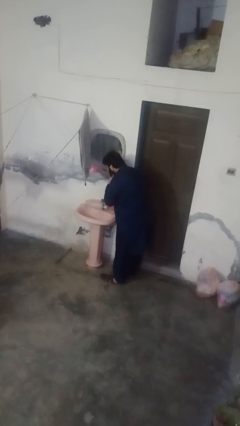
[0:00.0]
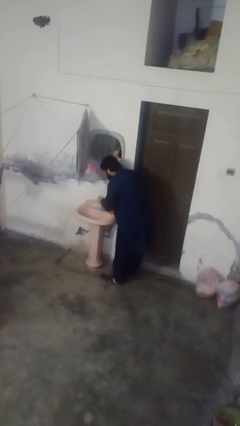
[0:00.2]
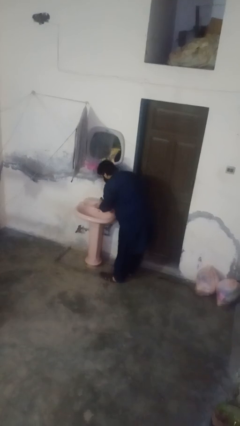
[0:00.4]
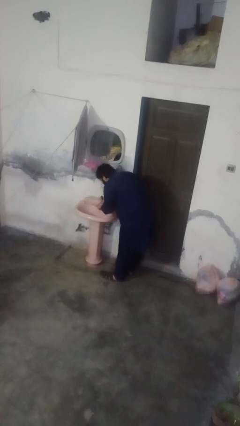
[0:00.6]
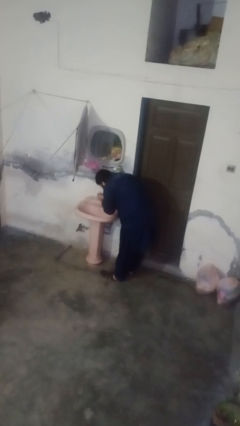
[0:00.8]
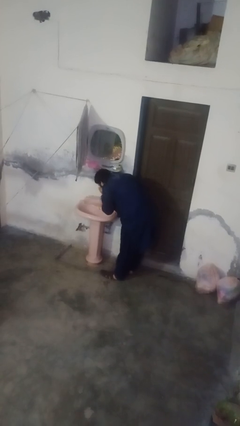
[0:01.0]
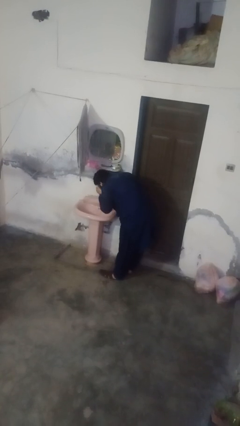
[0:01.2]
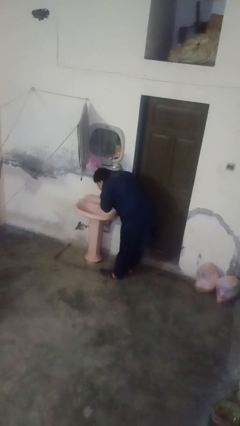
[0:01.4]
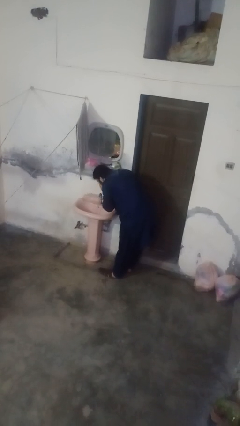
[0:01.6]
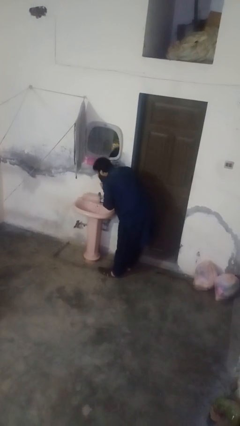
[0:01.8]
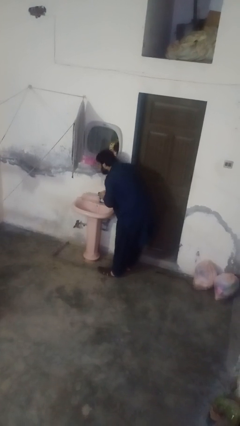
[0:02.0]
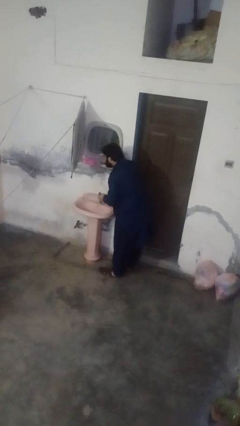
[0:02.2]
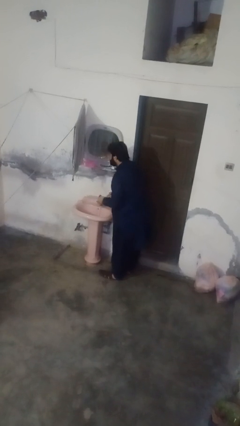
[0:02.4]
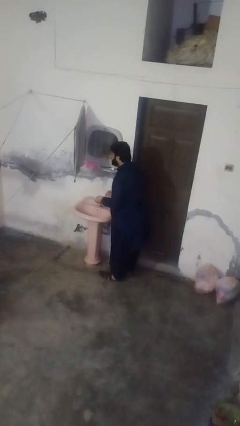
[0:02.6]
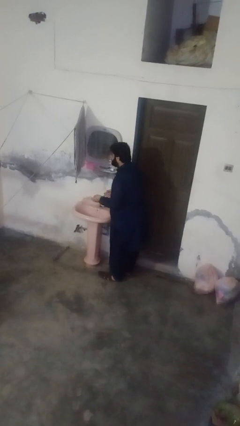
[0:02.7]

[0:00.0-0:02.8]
person washes face

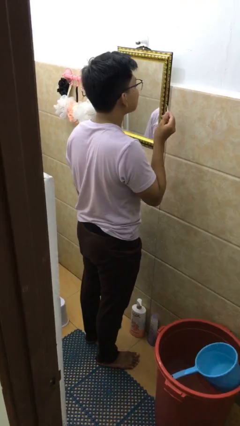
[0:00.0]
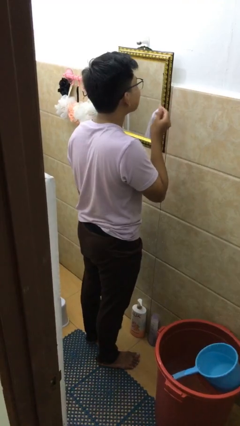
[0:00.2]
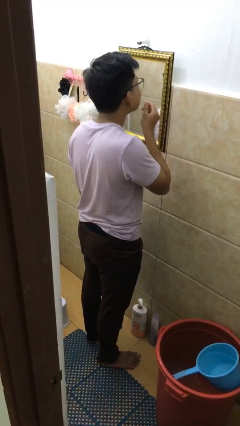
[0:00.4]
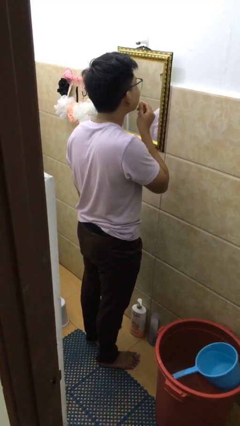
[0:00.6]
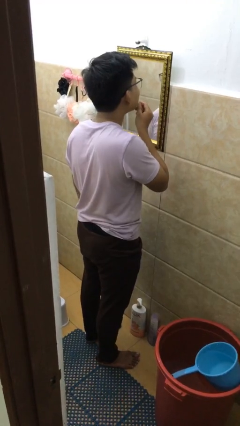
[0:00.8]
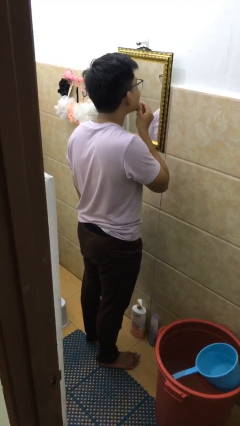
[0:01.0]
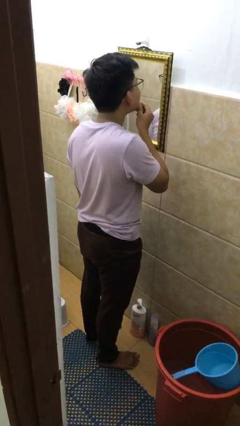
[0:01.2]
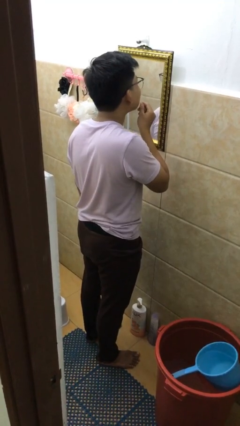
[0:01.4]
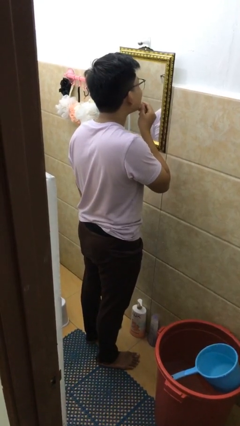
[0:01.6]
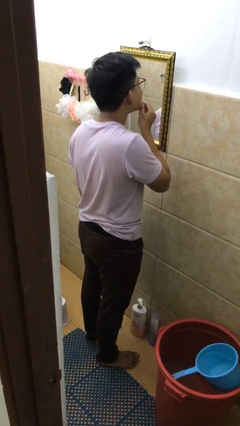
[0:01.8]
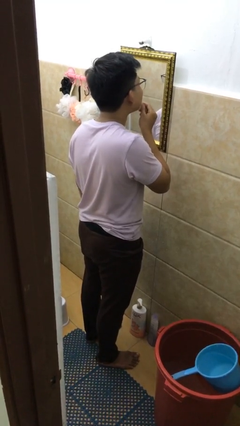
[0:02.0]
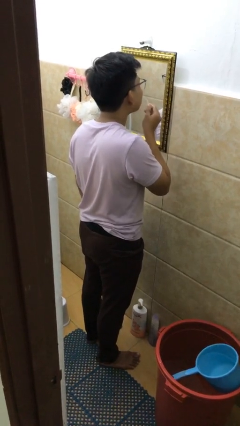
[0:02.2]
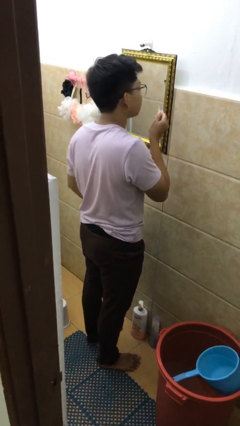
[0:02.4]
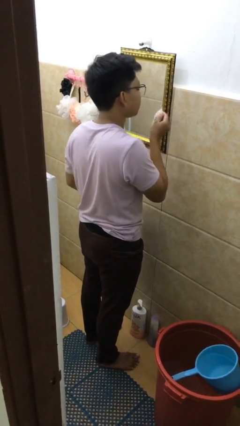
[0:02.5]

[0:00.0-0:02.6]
person flosses

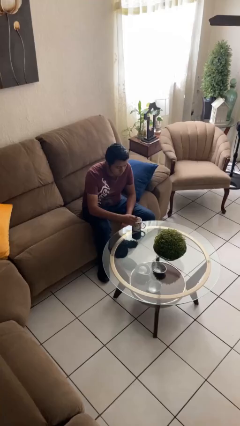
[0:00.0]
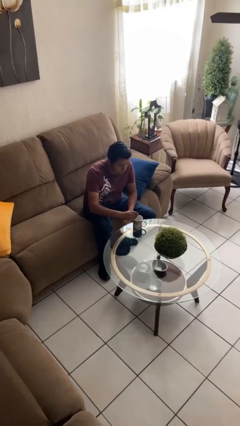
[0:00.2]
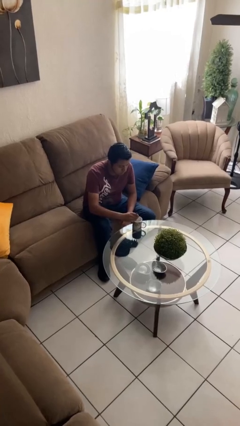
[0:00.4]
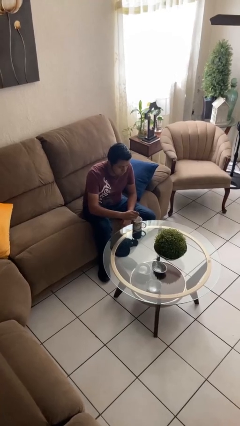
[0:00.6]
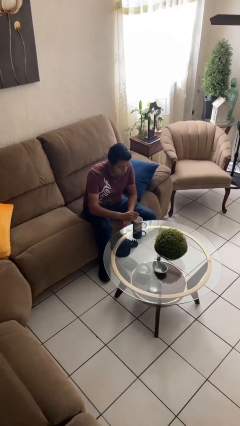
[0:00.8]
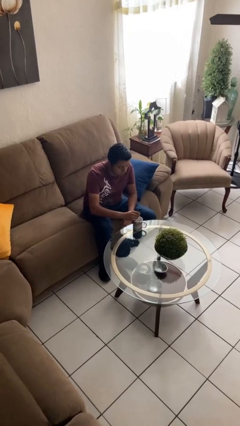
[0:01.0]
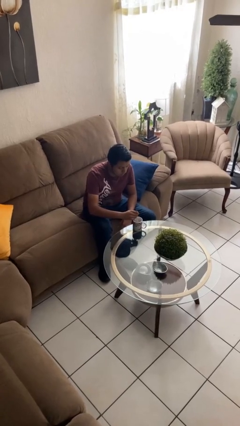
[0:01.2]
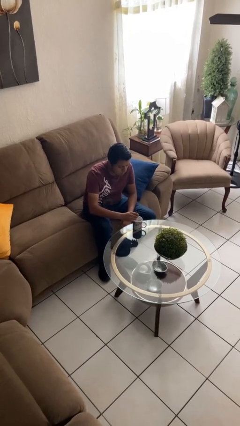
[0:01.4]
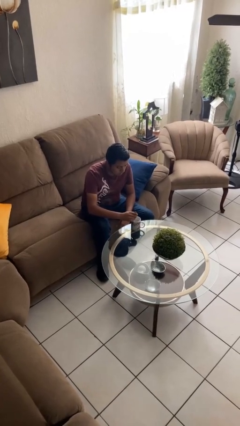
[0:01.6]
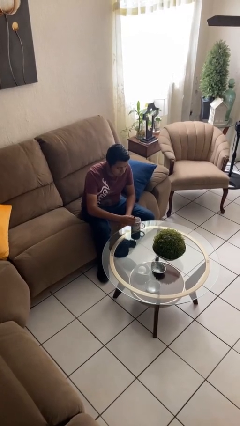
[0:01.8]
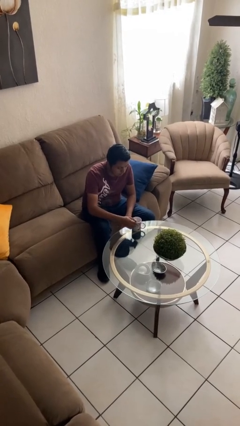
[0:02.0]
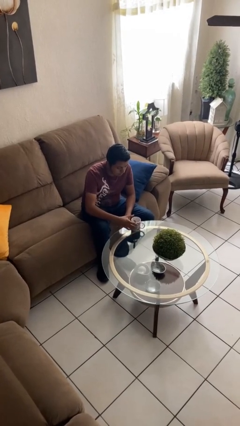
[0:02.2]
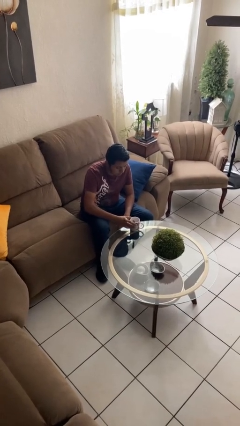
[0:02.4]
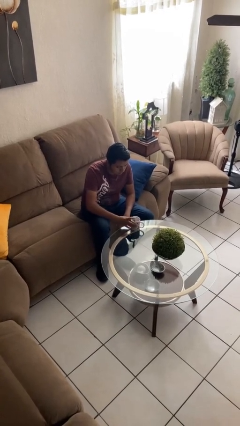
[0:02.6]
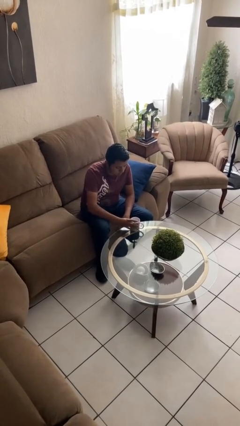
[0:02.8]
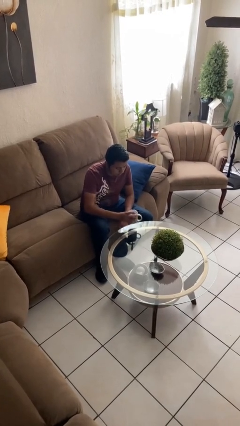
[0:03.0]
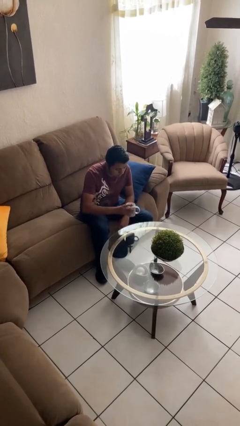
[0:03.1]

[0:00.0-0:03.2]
person stirs mug

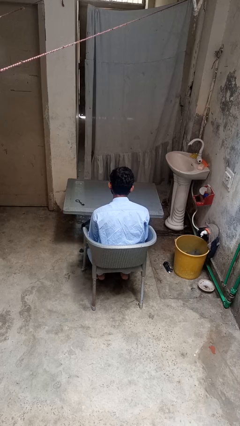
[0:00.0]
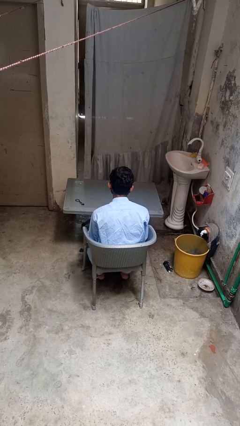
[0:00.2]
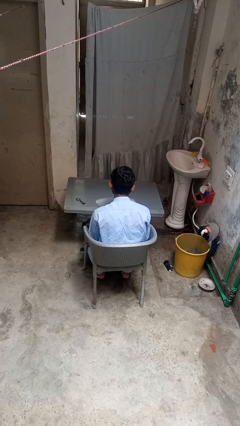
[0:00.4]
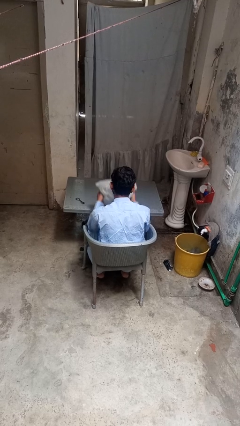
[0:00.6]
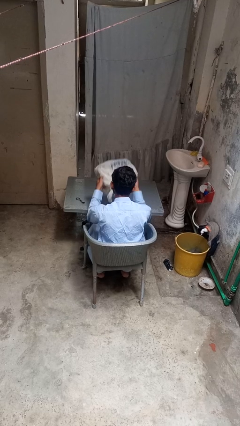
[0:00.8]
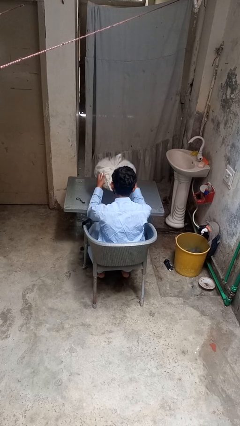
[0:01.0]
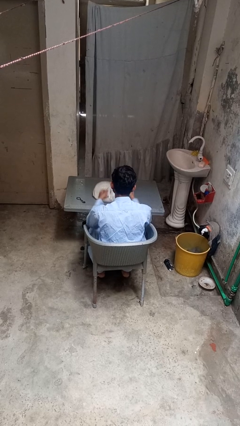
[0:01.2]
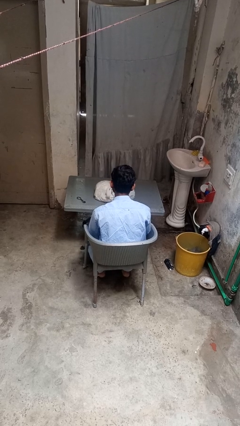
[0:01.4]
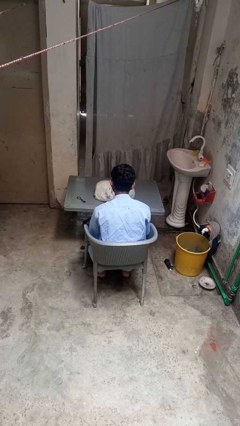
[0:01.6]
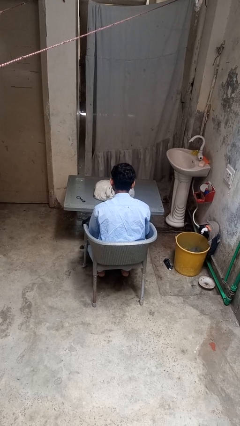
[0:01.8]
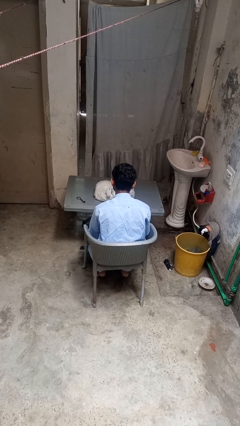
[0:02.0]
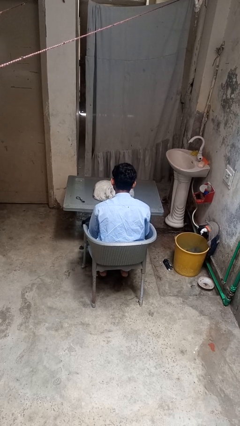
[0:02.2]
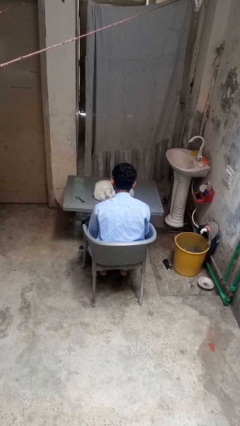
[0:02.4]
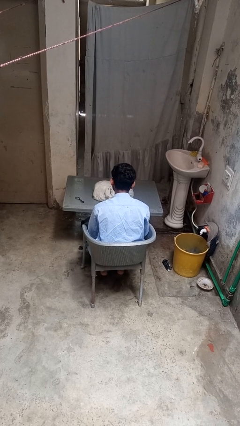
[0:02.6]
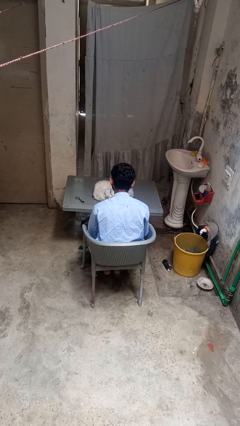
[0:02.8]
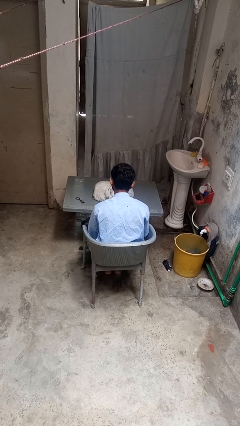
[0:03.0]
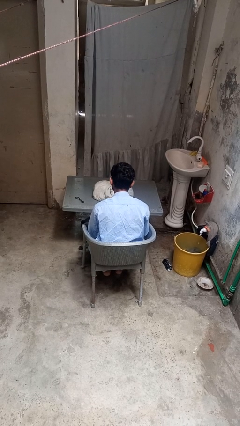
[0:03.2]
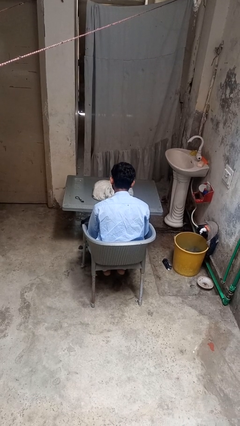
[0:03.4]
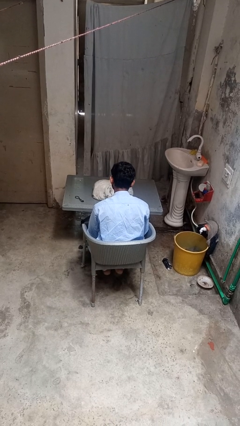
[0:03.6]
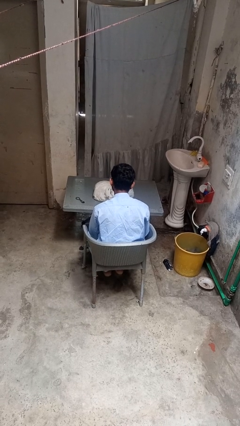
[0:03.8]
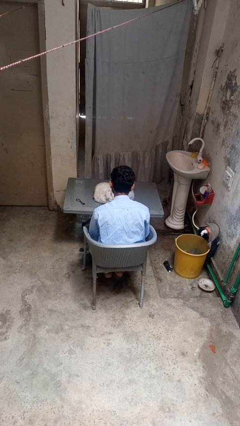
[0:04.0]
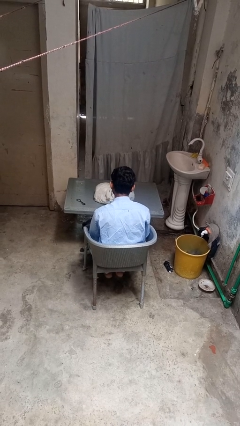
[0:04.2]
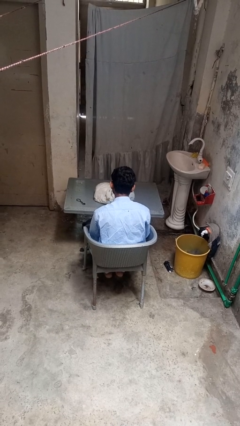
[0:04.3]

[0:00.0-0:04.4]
person throws object on table

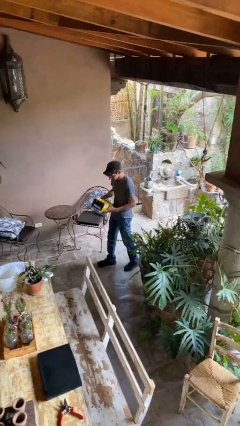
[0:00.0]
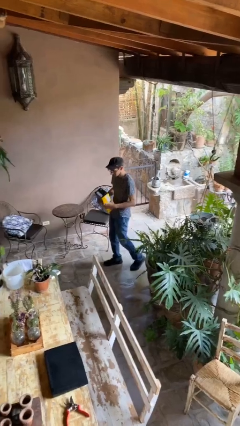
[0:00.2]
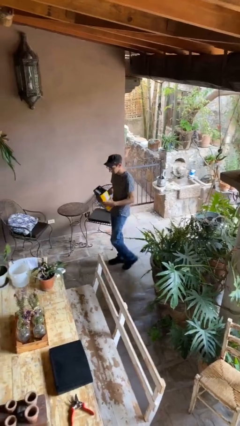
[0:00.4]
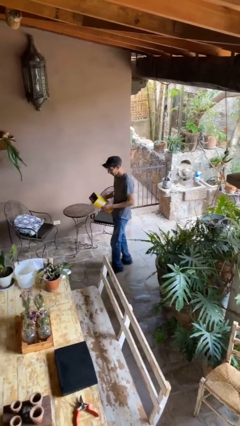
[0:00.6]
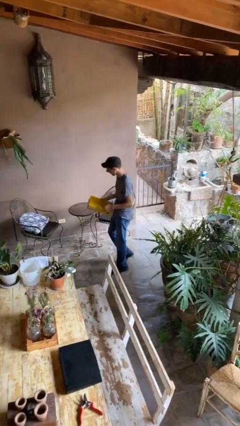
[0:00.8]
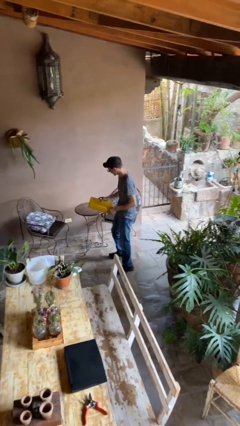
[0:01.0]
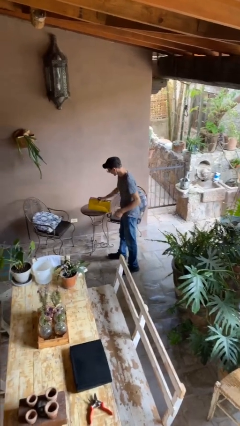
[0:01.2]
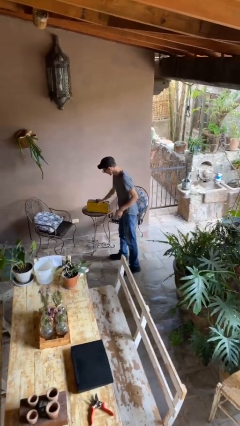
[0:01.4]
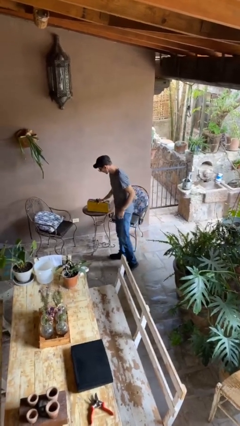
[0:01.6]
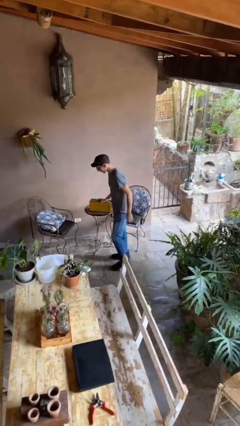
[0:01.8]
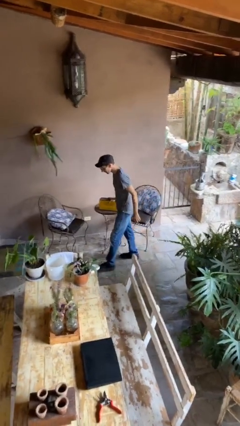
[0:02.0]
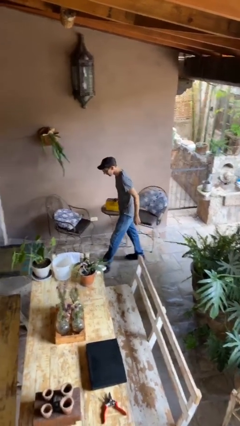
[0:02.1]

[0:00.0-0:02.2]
person puts down object on table

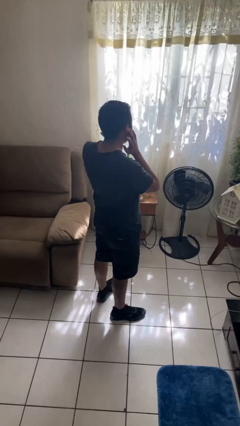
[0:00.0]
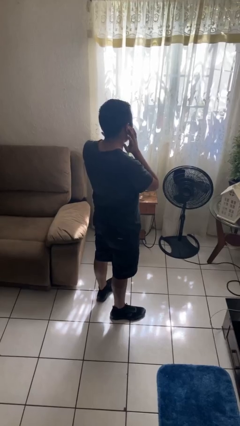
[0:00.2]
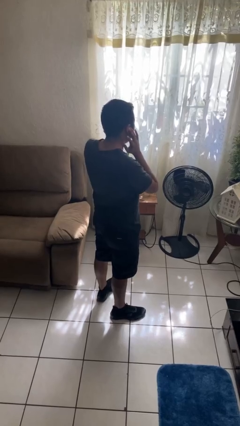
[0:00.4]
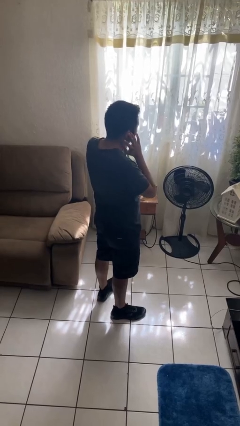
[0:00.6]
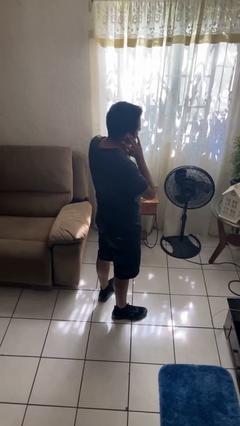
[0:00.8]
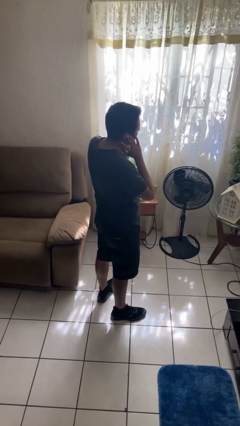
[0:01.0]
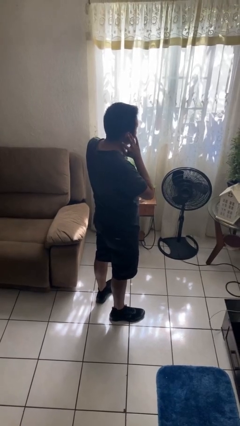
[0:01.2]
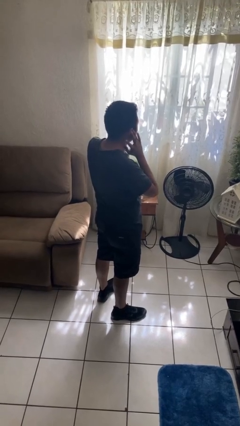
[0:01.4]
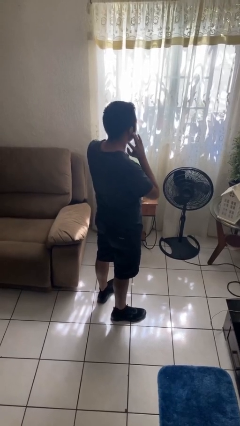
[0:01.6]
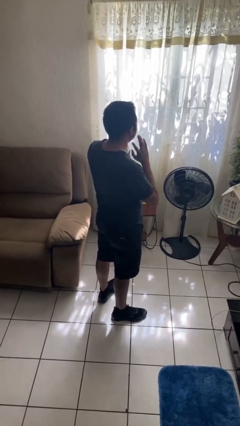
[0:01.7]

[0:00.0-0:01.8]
person puts fingers in ear

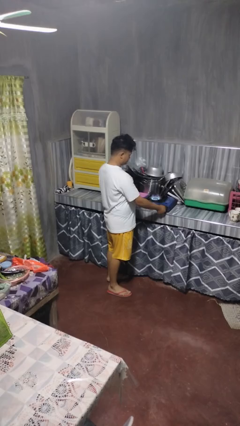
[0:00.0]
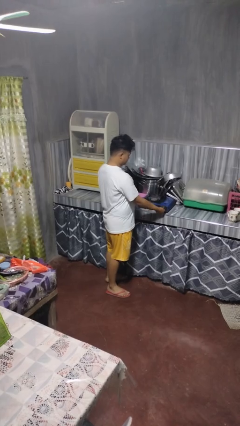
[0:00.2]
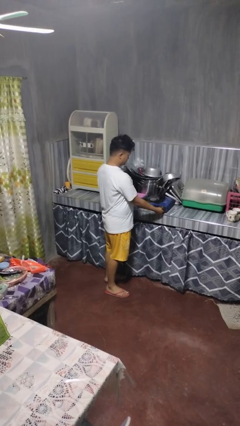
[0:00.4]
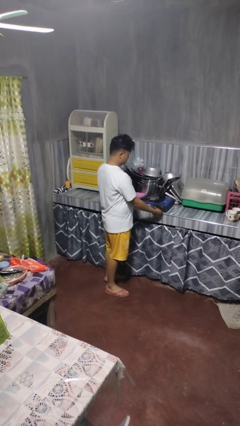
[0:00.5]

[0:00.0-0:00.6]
person turns off stovetop
